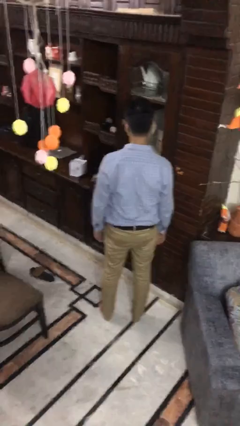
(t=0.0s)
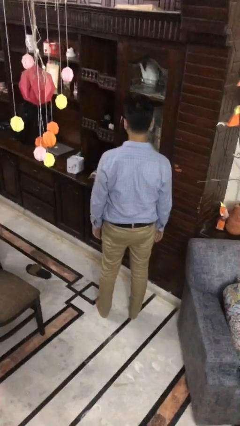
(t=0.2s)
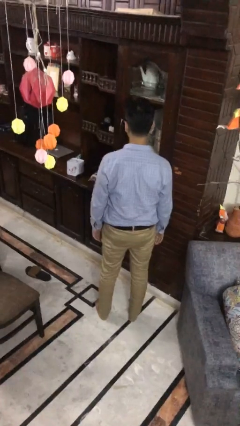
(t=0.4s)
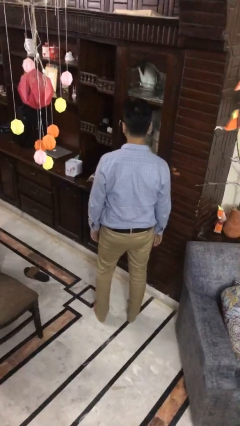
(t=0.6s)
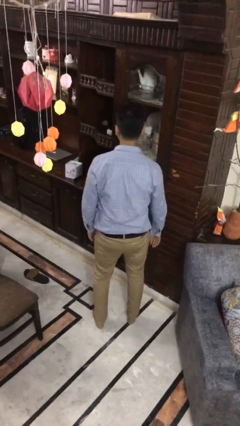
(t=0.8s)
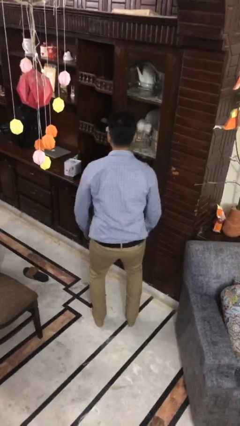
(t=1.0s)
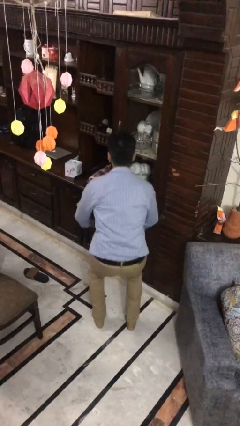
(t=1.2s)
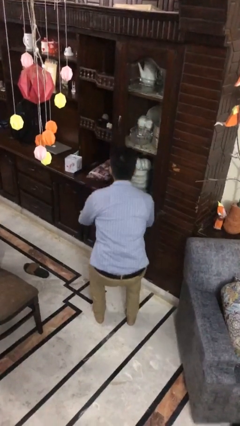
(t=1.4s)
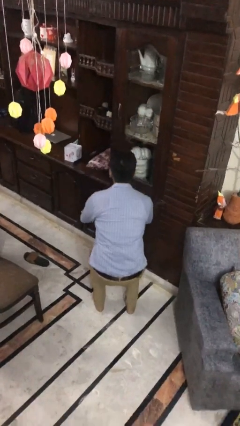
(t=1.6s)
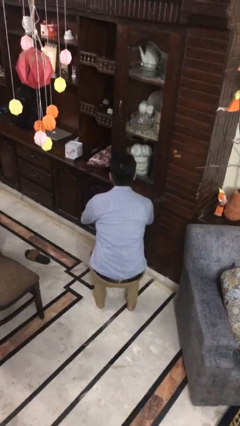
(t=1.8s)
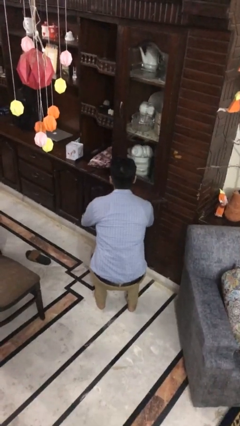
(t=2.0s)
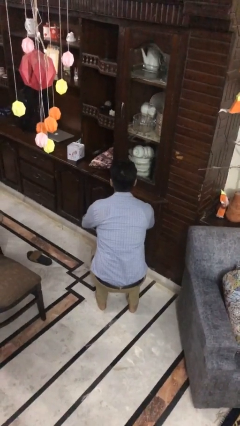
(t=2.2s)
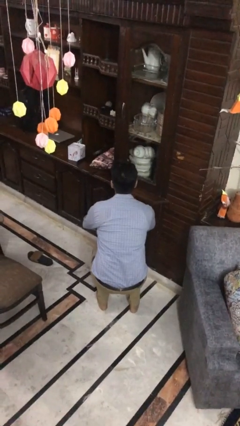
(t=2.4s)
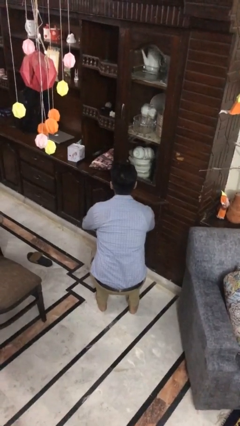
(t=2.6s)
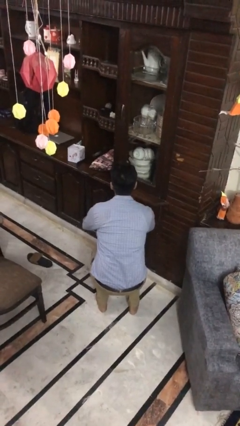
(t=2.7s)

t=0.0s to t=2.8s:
person squats

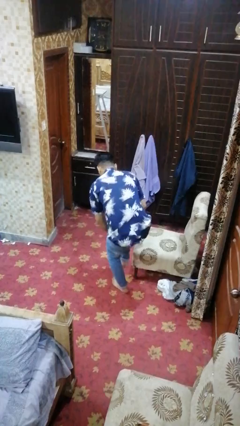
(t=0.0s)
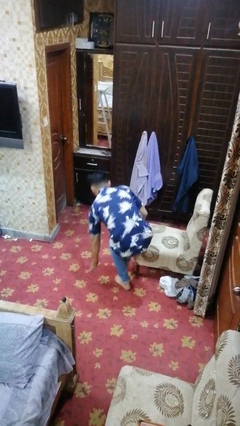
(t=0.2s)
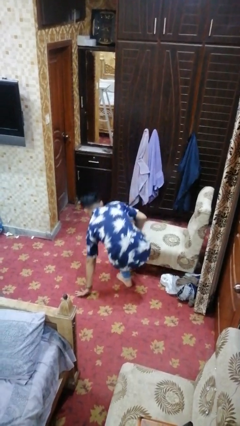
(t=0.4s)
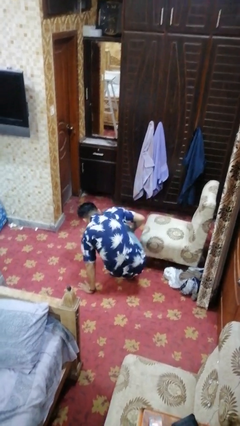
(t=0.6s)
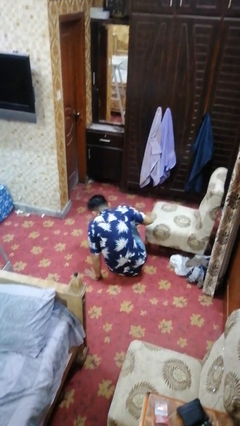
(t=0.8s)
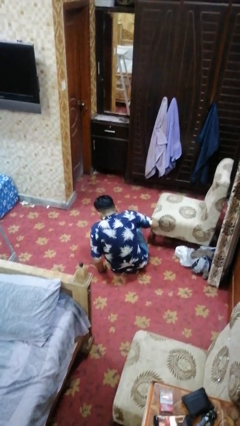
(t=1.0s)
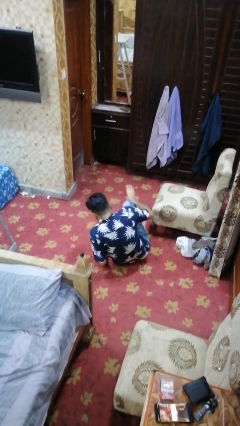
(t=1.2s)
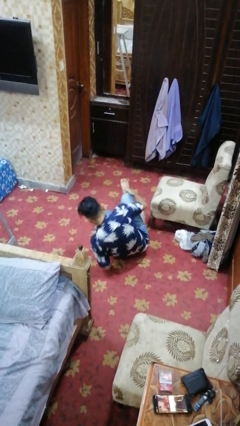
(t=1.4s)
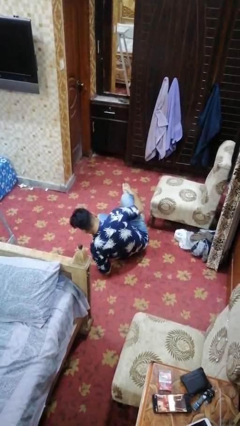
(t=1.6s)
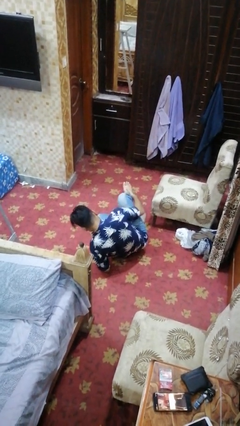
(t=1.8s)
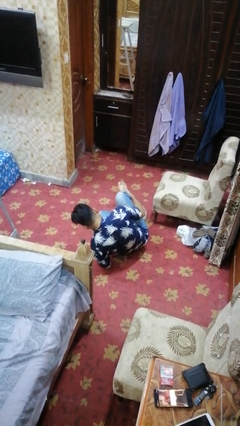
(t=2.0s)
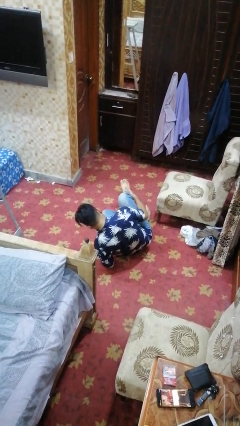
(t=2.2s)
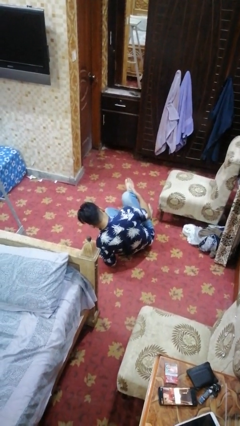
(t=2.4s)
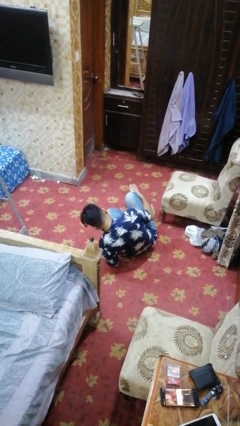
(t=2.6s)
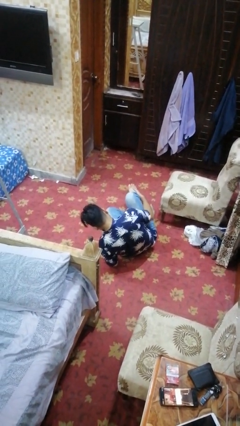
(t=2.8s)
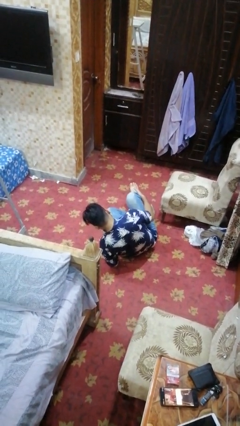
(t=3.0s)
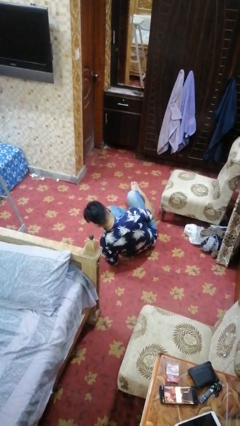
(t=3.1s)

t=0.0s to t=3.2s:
person lies down on floor

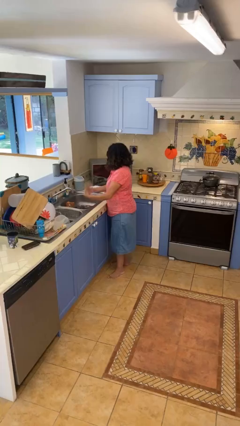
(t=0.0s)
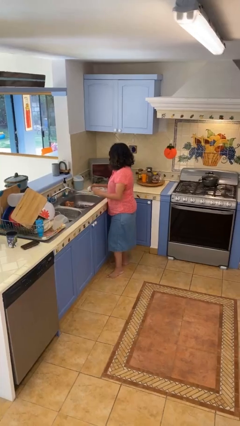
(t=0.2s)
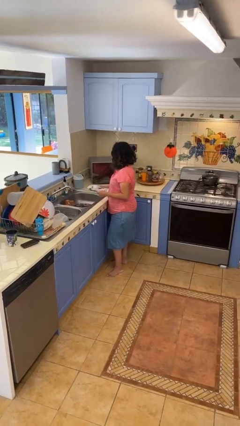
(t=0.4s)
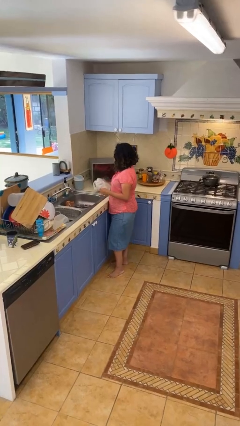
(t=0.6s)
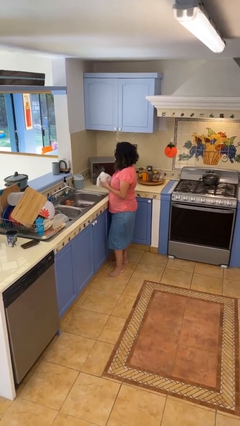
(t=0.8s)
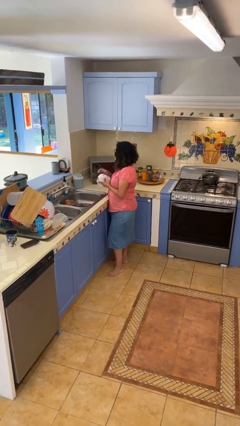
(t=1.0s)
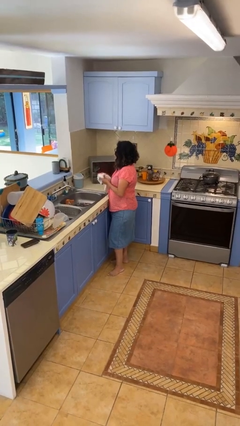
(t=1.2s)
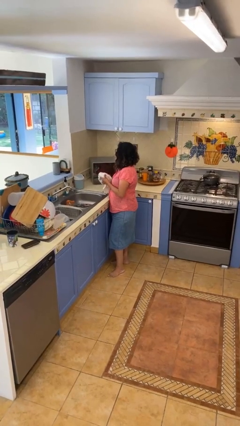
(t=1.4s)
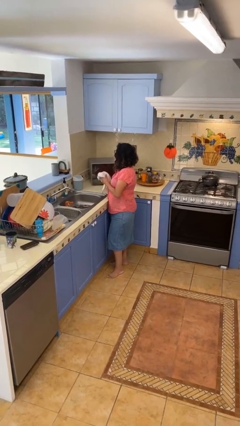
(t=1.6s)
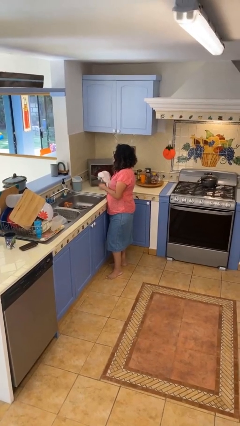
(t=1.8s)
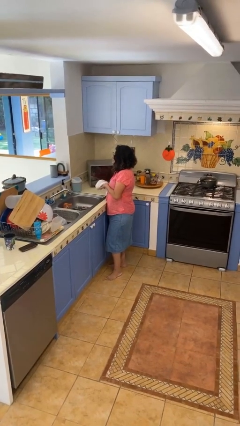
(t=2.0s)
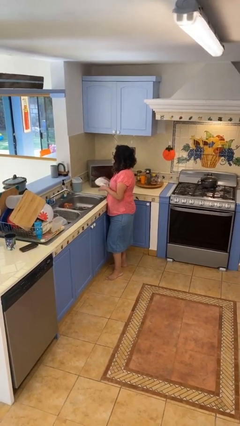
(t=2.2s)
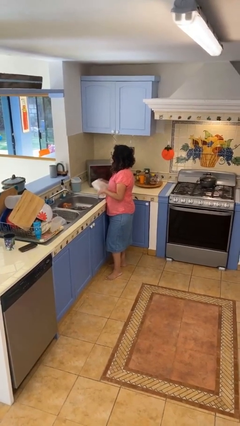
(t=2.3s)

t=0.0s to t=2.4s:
person dries hands with towel

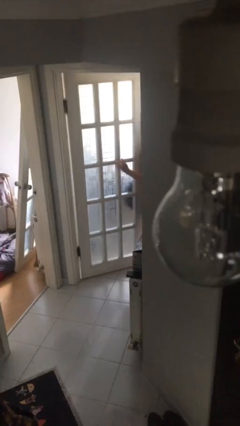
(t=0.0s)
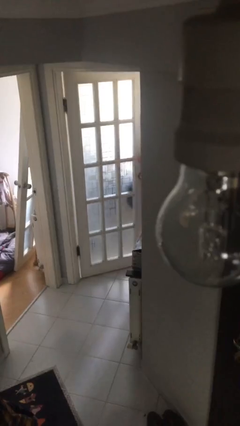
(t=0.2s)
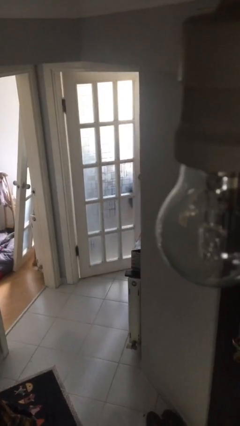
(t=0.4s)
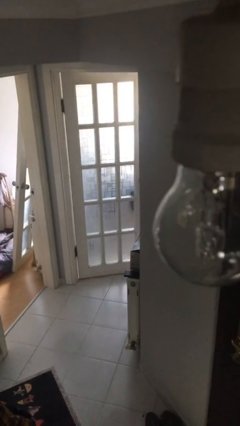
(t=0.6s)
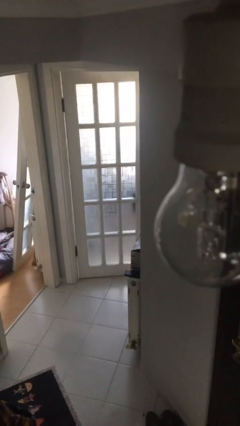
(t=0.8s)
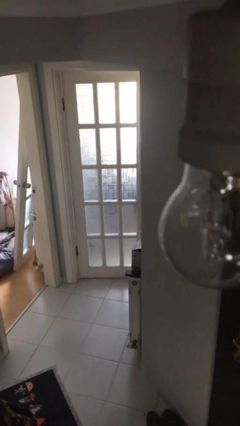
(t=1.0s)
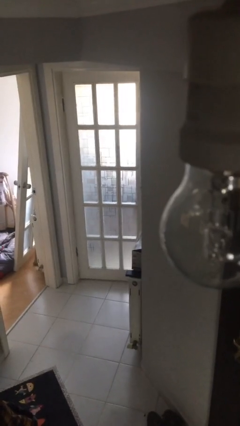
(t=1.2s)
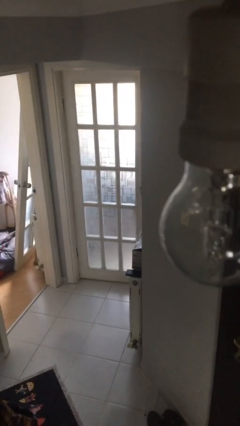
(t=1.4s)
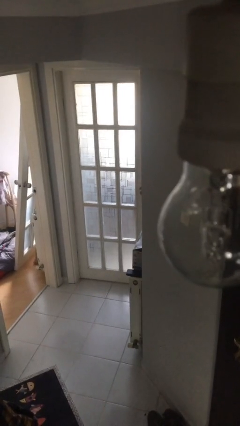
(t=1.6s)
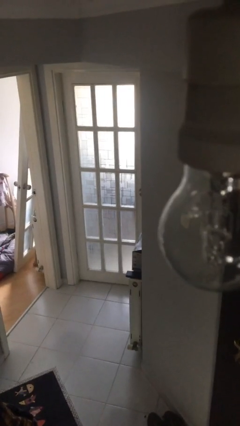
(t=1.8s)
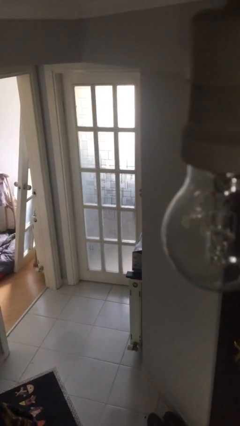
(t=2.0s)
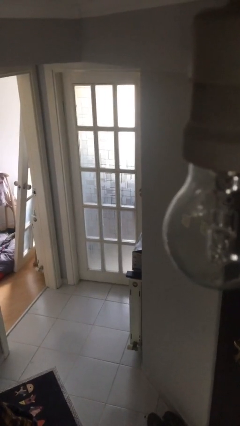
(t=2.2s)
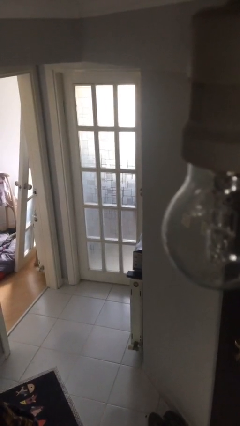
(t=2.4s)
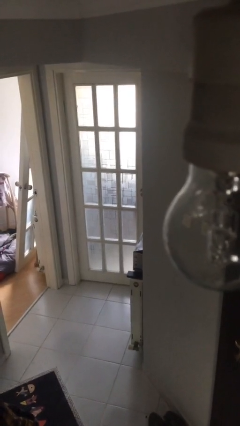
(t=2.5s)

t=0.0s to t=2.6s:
person closes facility door

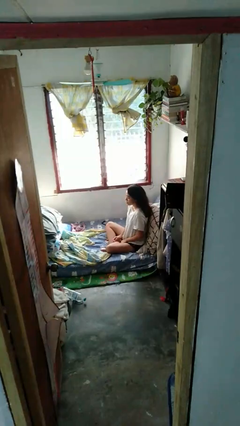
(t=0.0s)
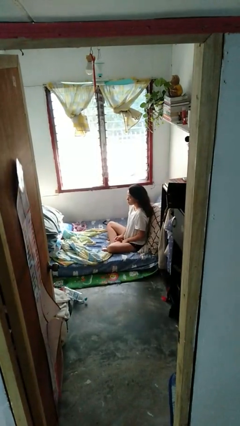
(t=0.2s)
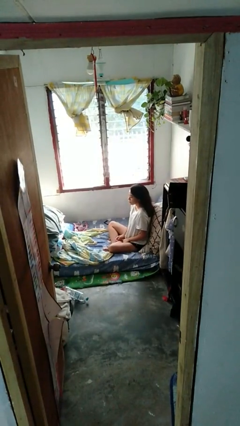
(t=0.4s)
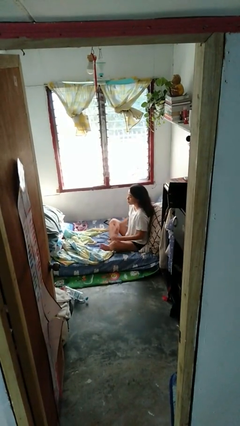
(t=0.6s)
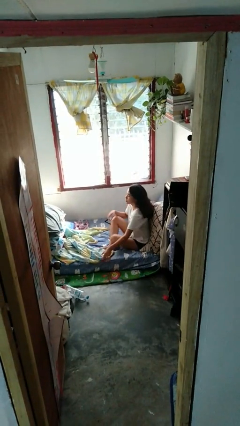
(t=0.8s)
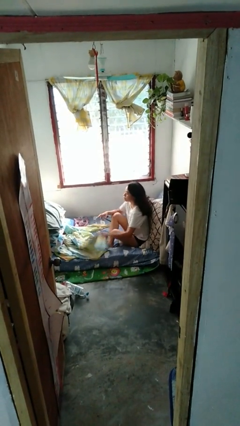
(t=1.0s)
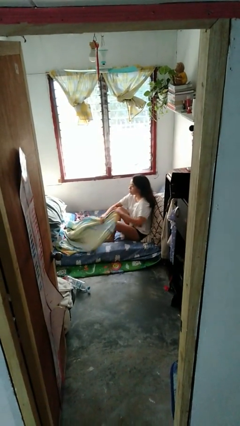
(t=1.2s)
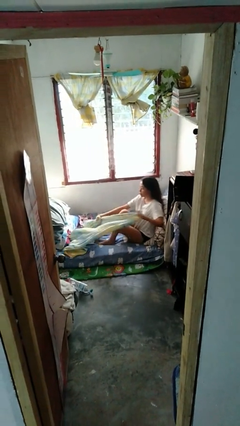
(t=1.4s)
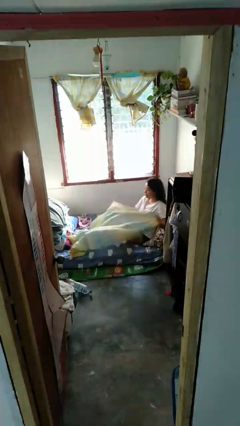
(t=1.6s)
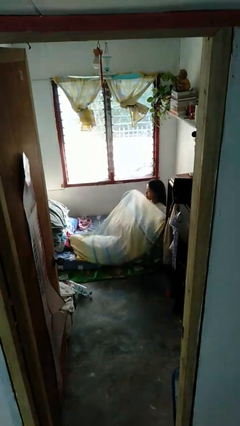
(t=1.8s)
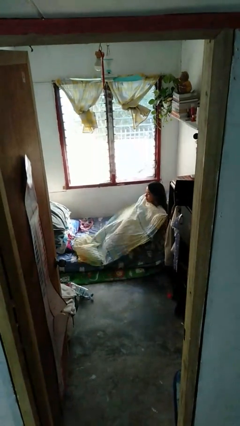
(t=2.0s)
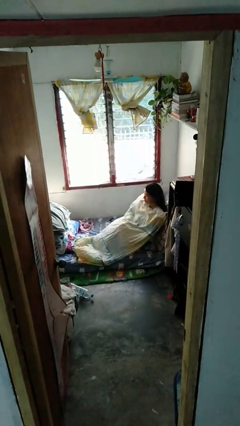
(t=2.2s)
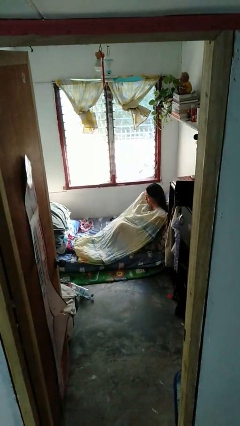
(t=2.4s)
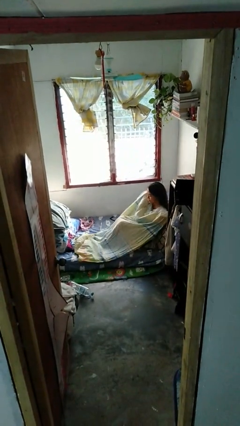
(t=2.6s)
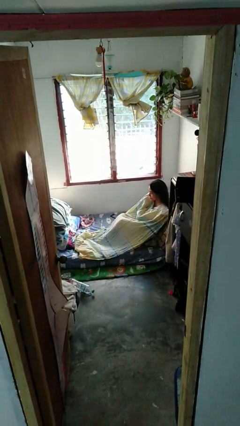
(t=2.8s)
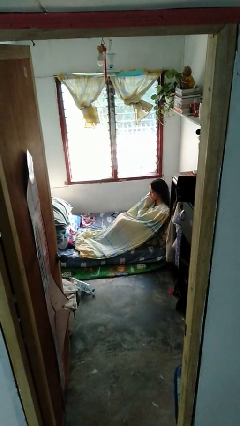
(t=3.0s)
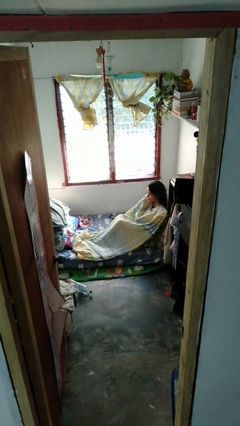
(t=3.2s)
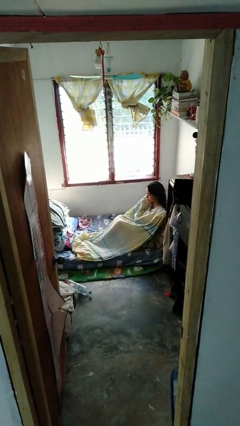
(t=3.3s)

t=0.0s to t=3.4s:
person covers with bedsheets

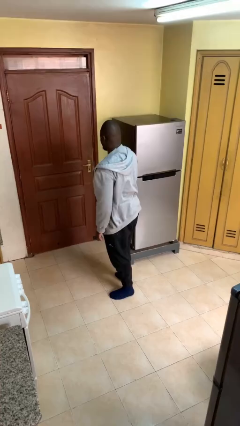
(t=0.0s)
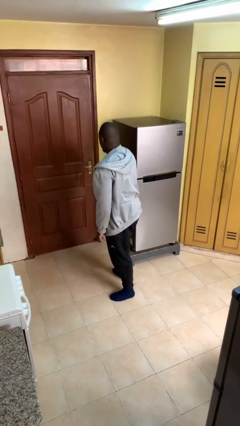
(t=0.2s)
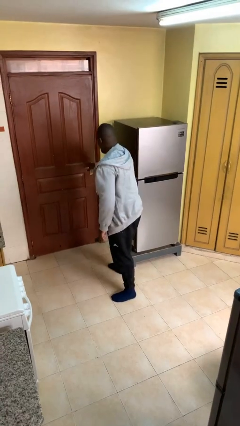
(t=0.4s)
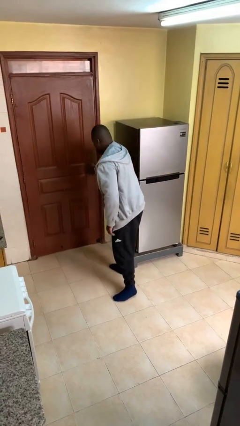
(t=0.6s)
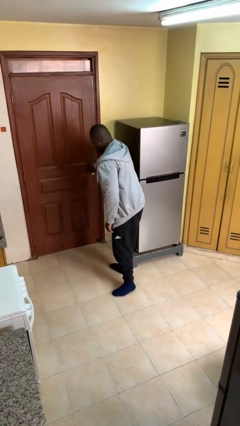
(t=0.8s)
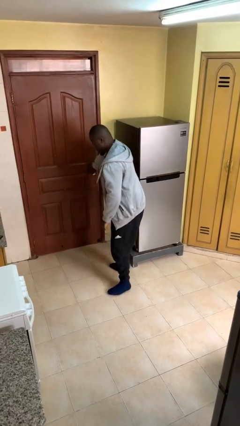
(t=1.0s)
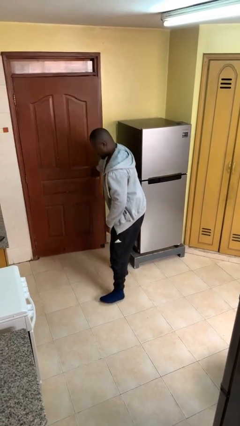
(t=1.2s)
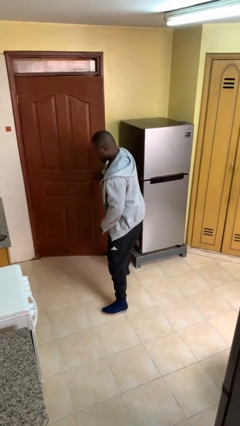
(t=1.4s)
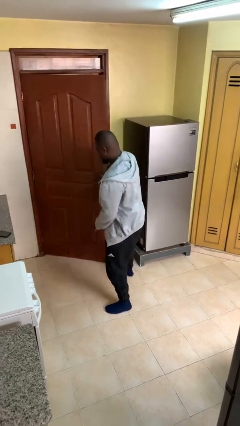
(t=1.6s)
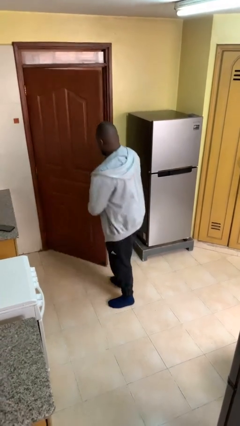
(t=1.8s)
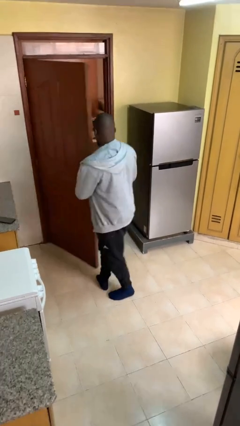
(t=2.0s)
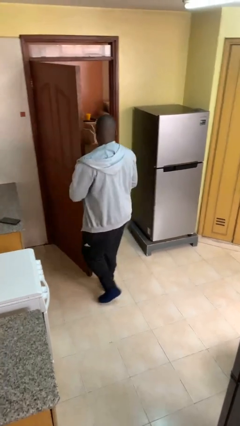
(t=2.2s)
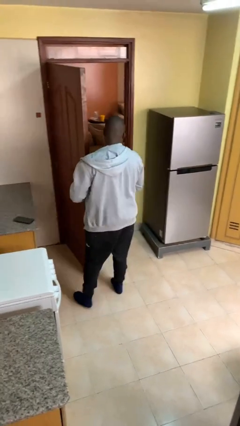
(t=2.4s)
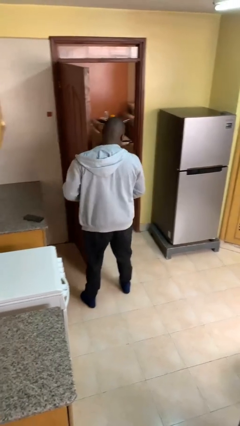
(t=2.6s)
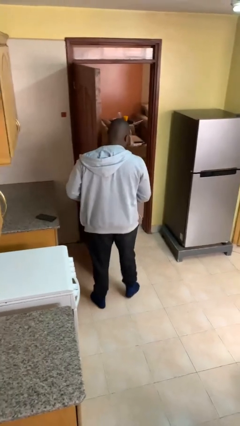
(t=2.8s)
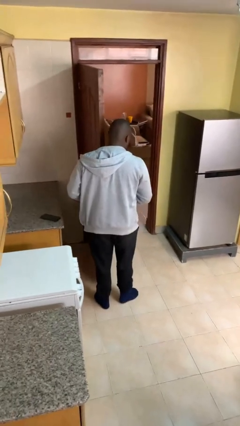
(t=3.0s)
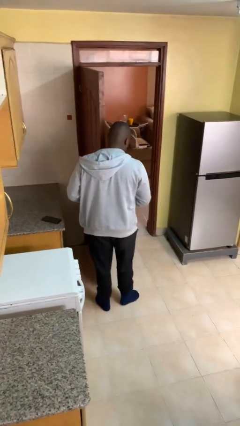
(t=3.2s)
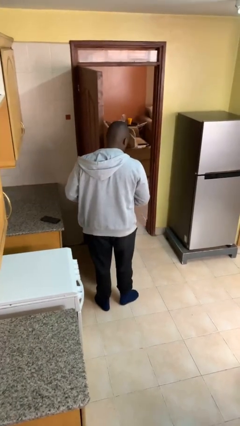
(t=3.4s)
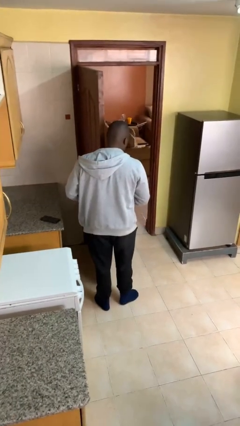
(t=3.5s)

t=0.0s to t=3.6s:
person opens facility door
